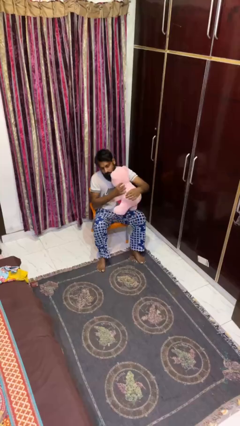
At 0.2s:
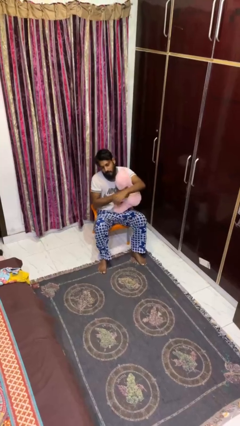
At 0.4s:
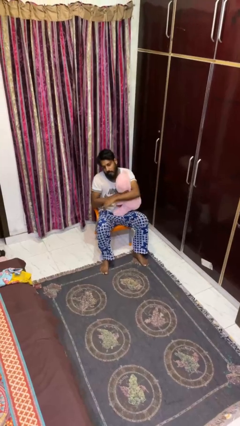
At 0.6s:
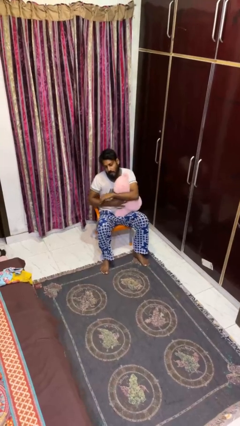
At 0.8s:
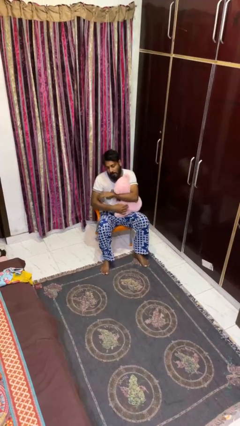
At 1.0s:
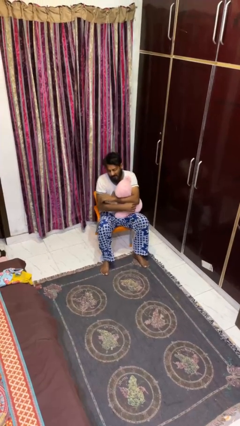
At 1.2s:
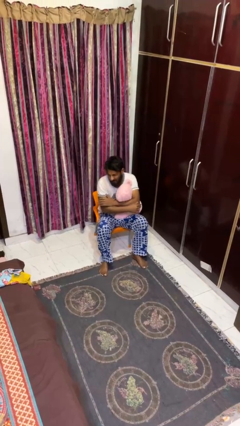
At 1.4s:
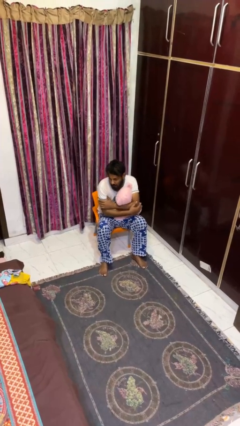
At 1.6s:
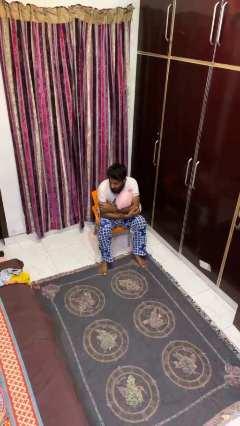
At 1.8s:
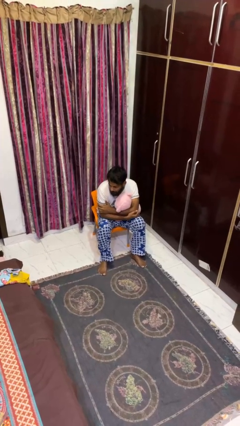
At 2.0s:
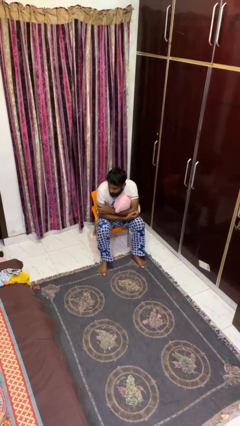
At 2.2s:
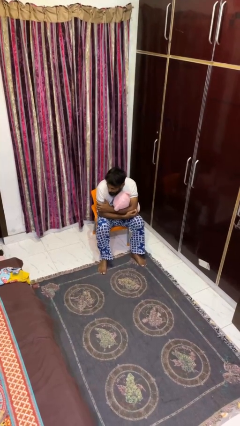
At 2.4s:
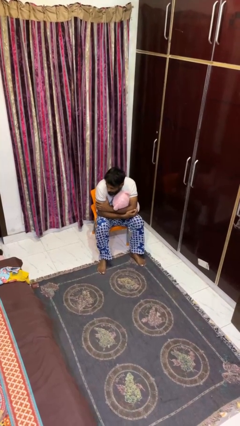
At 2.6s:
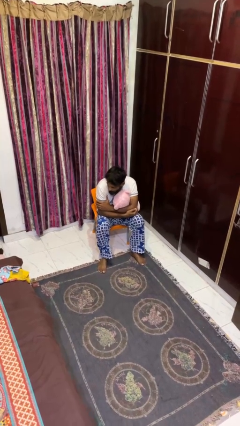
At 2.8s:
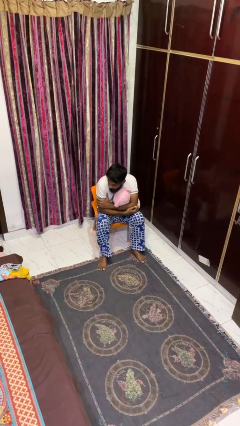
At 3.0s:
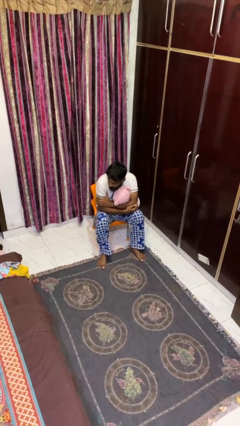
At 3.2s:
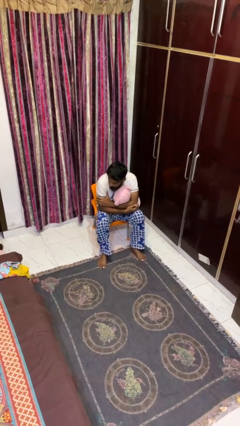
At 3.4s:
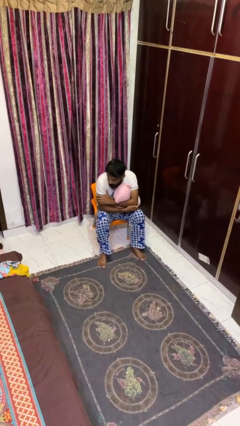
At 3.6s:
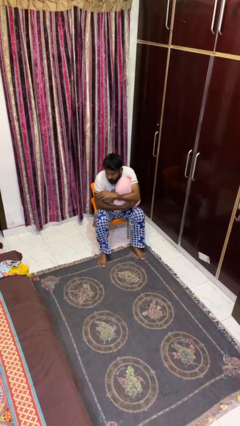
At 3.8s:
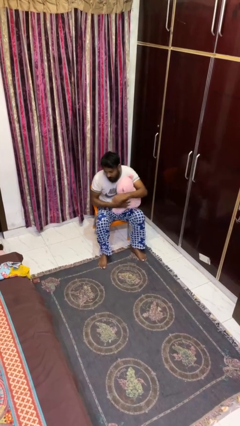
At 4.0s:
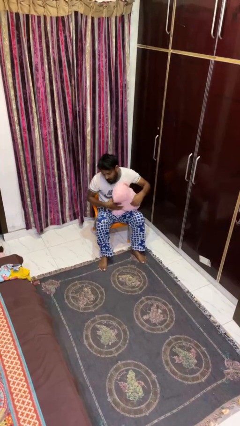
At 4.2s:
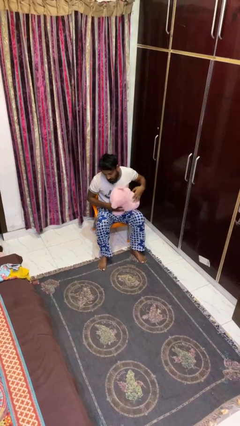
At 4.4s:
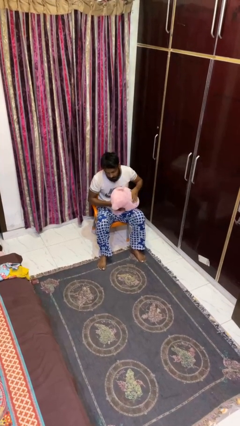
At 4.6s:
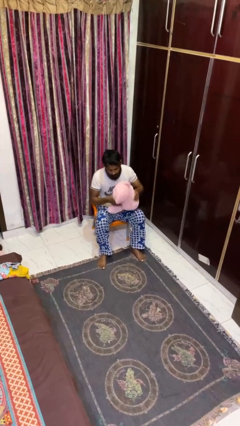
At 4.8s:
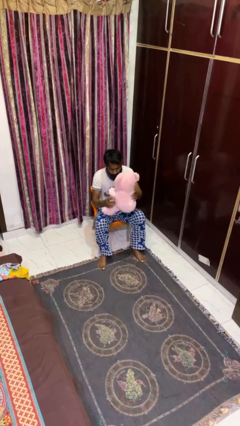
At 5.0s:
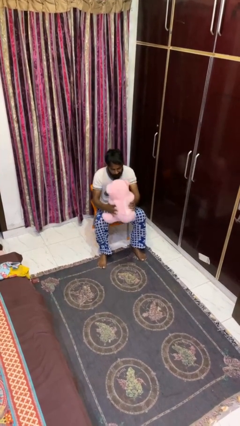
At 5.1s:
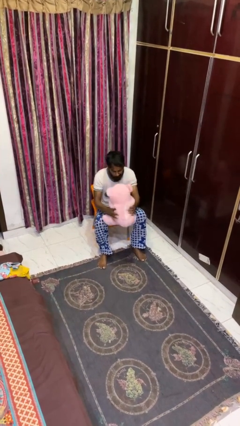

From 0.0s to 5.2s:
person hugs stuffed animal

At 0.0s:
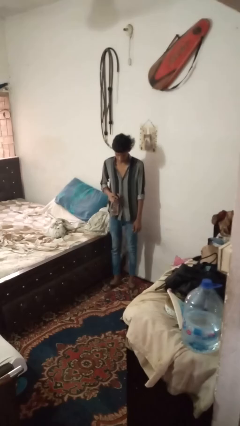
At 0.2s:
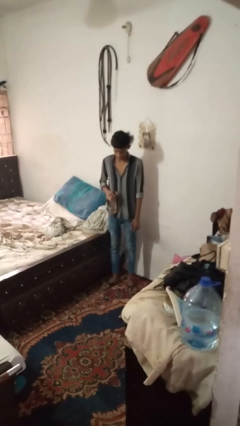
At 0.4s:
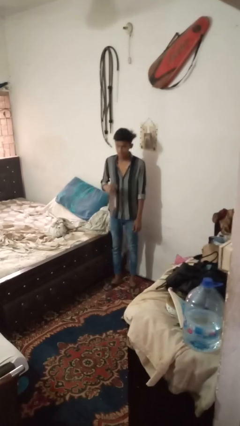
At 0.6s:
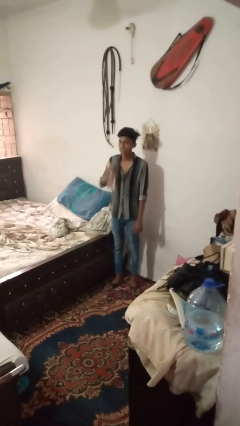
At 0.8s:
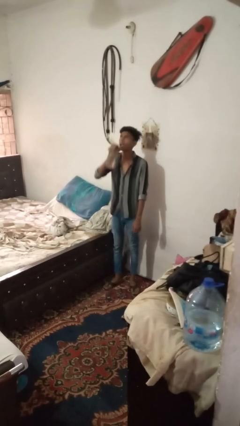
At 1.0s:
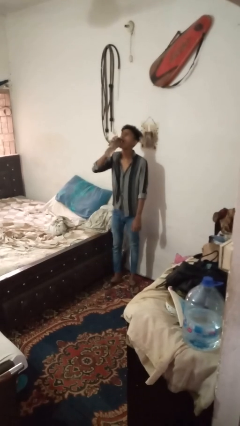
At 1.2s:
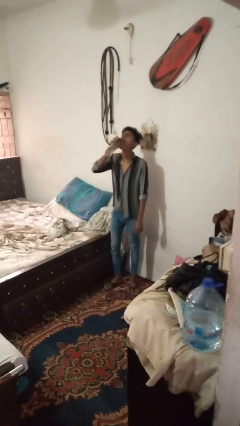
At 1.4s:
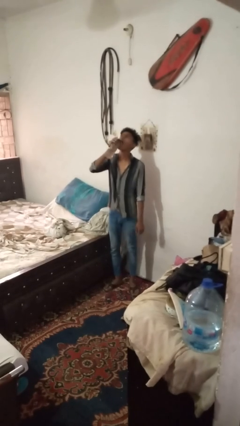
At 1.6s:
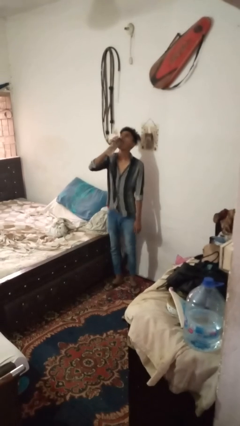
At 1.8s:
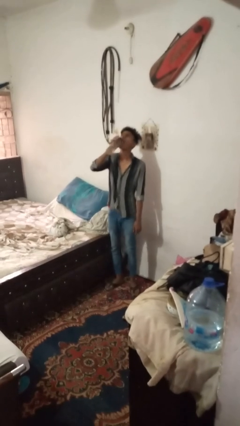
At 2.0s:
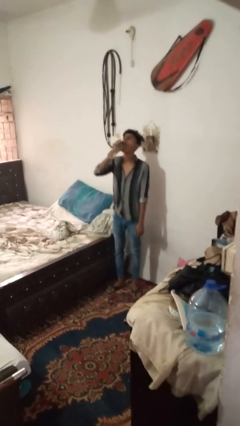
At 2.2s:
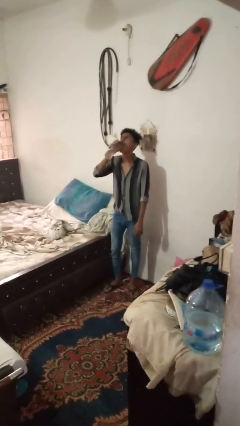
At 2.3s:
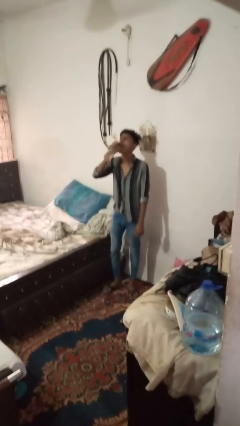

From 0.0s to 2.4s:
person drinks from bottle

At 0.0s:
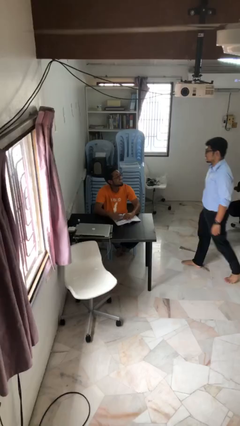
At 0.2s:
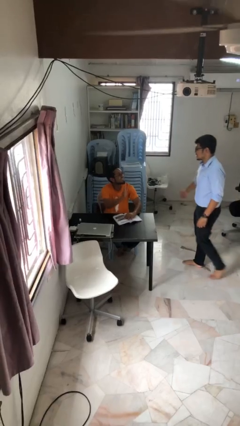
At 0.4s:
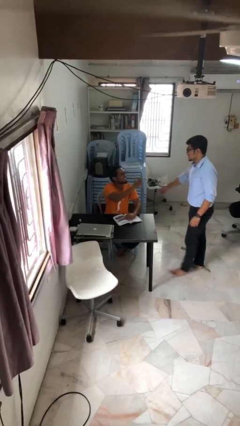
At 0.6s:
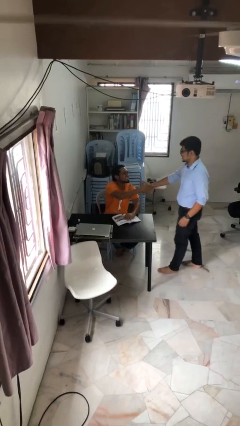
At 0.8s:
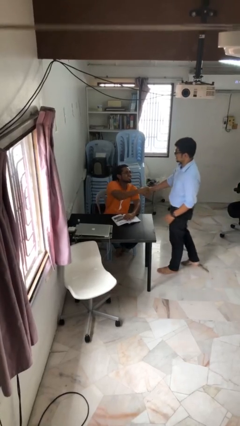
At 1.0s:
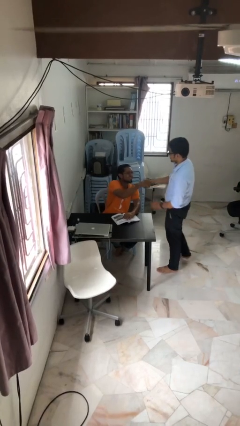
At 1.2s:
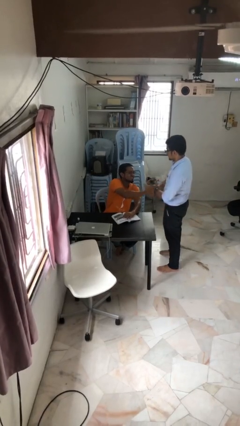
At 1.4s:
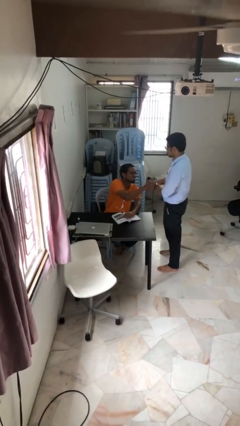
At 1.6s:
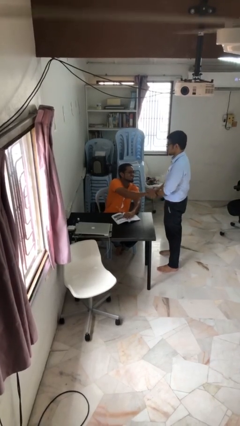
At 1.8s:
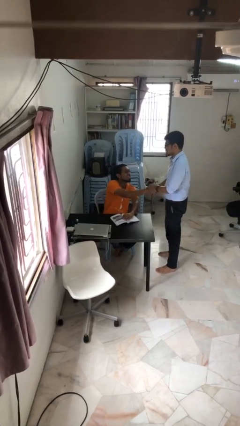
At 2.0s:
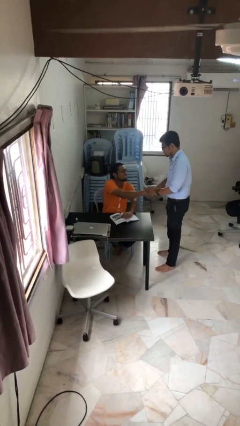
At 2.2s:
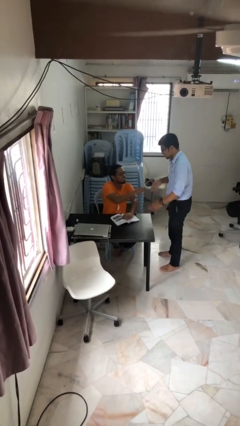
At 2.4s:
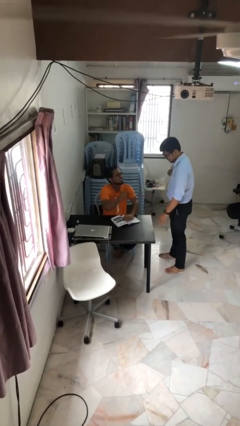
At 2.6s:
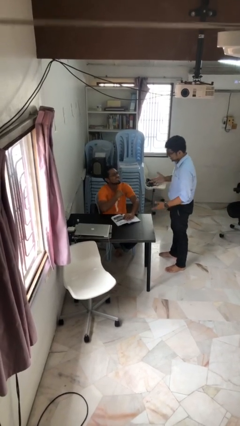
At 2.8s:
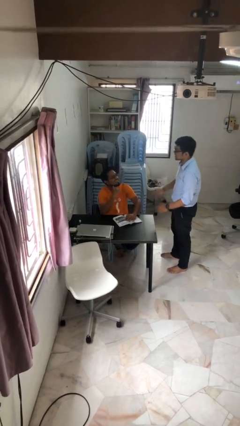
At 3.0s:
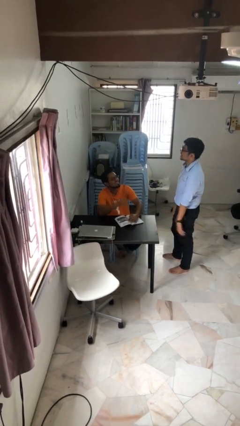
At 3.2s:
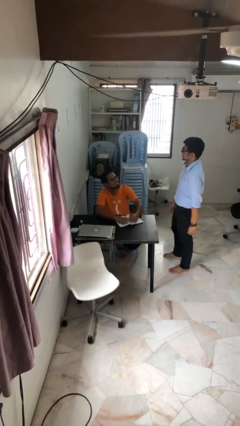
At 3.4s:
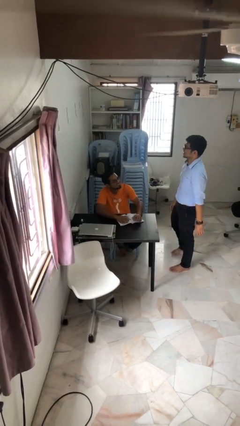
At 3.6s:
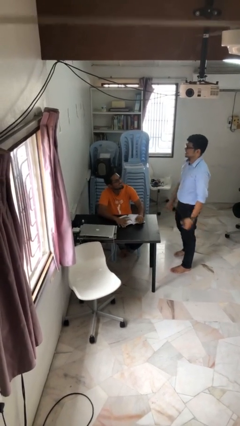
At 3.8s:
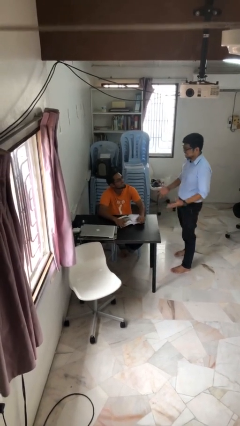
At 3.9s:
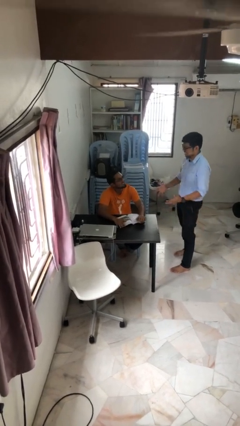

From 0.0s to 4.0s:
person shakes hand

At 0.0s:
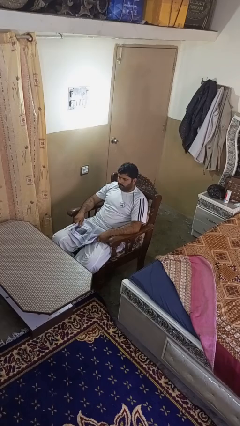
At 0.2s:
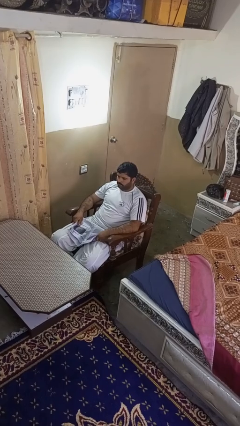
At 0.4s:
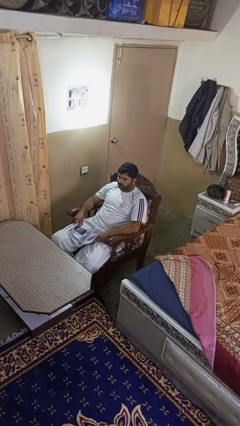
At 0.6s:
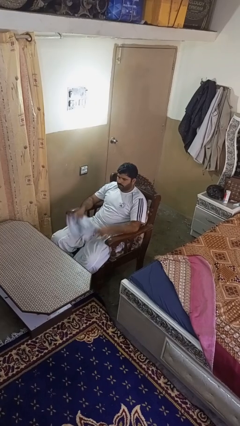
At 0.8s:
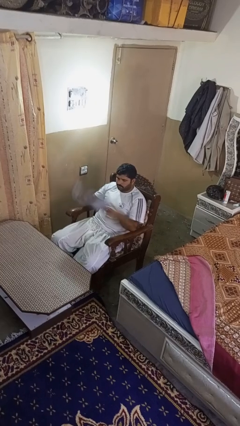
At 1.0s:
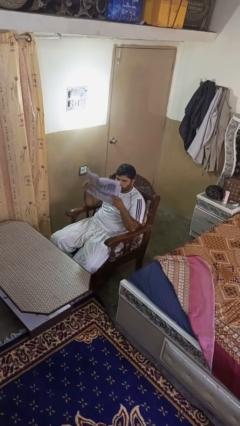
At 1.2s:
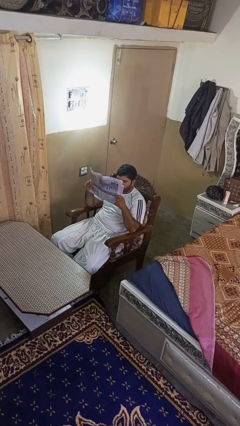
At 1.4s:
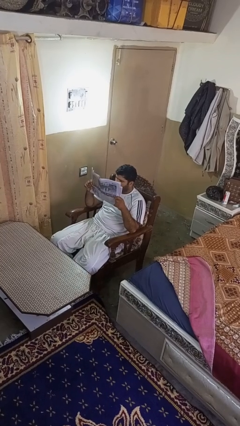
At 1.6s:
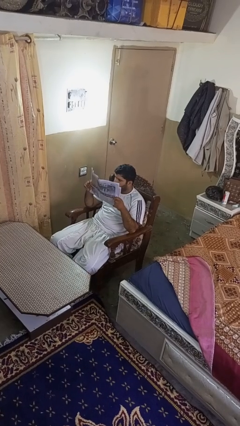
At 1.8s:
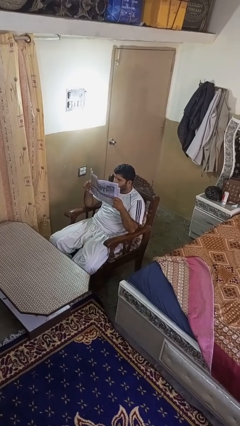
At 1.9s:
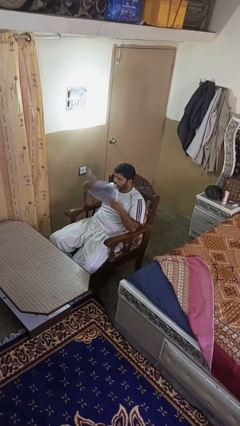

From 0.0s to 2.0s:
person reads newspaper

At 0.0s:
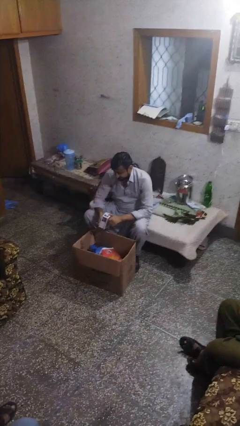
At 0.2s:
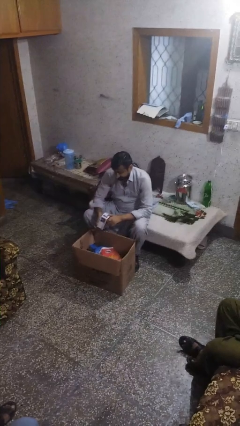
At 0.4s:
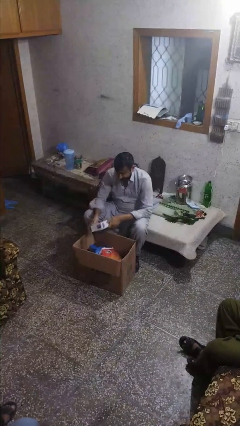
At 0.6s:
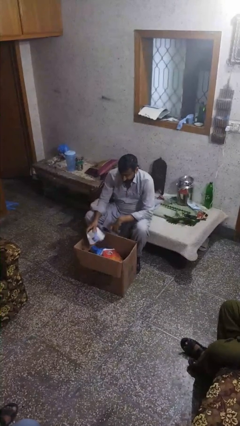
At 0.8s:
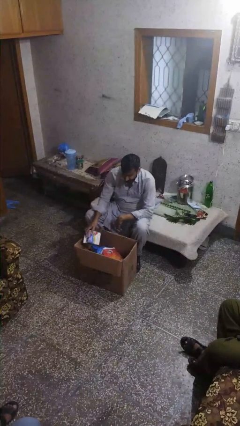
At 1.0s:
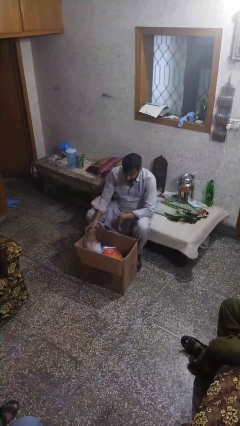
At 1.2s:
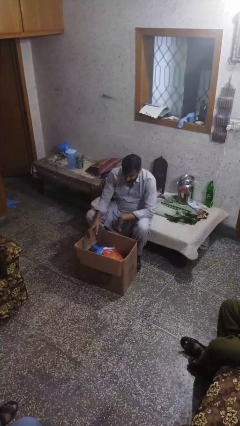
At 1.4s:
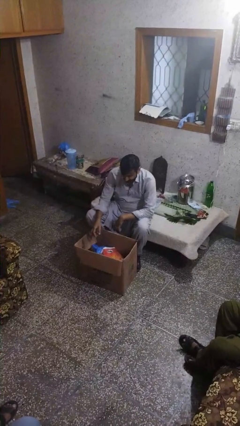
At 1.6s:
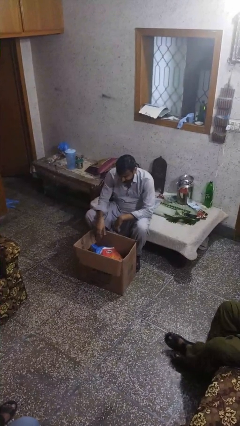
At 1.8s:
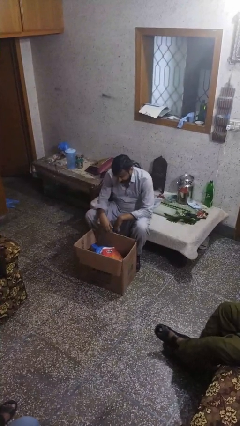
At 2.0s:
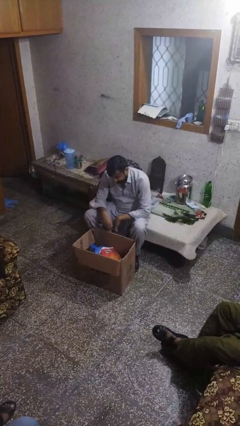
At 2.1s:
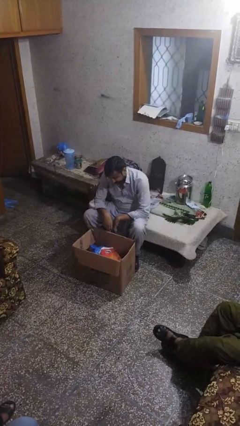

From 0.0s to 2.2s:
person puts object into box

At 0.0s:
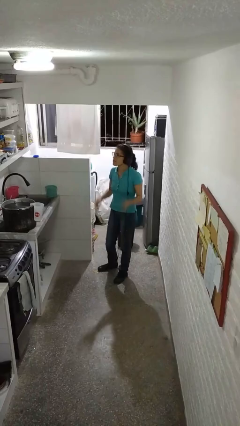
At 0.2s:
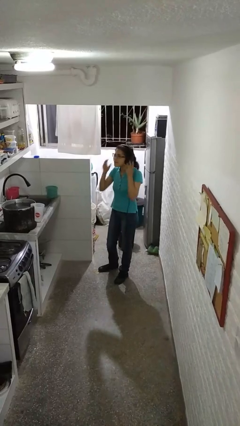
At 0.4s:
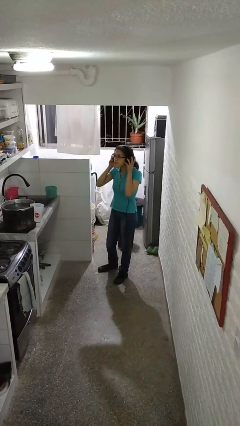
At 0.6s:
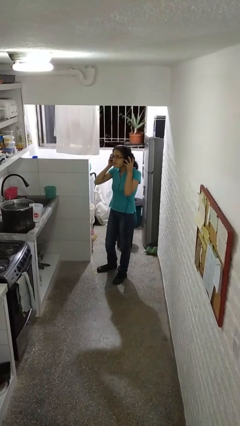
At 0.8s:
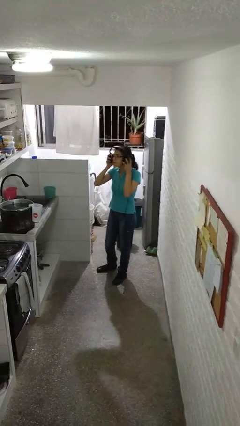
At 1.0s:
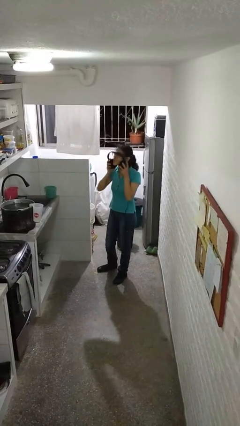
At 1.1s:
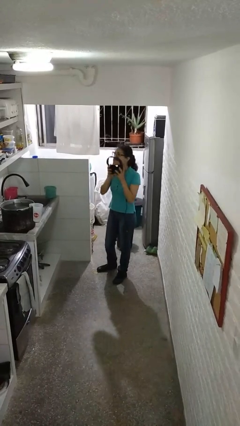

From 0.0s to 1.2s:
person takes off headphones

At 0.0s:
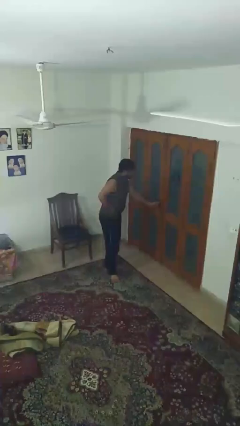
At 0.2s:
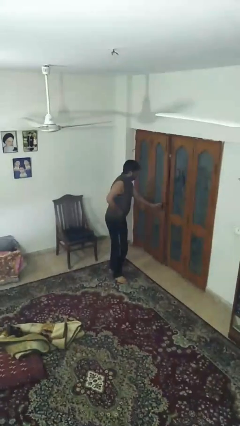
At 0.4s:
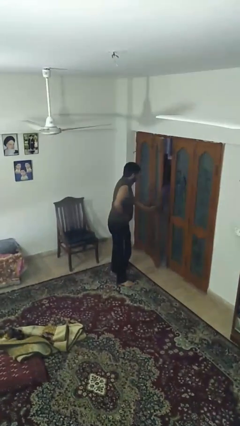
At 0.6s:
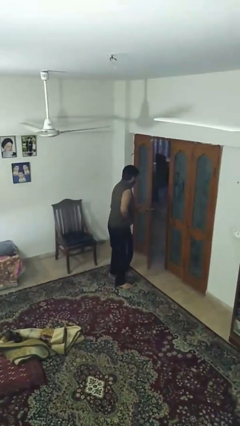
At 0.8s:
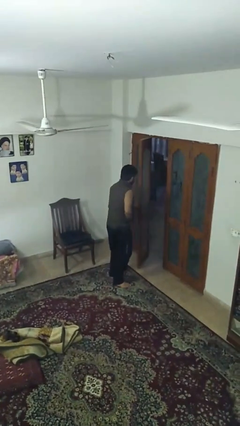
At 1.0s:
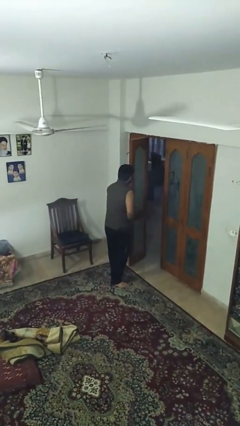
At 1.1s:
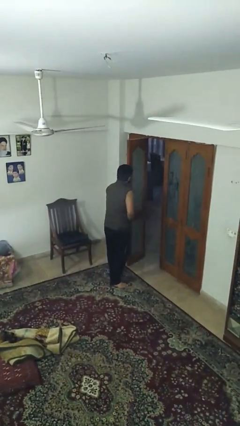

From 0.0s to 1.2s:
person opens facility door
